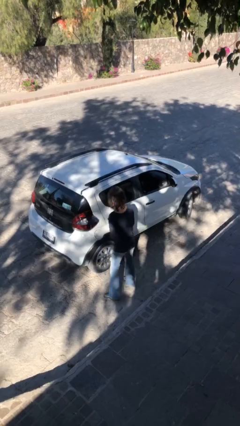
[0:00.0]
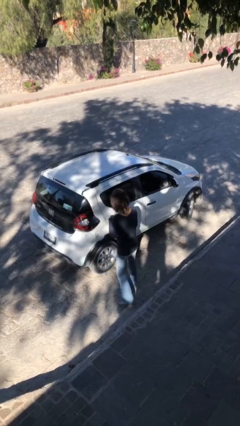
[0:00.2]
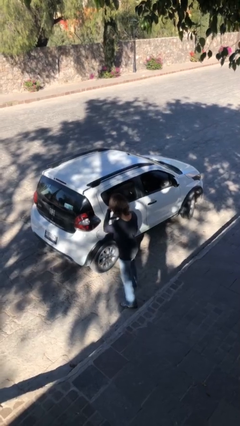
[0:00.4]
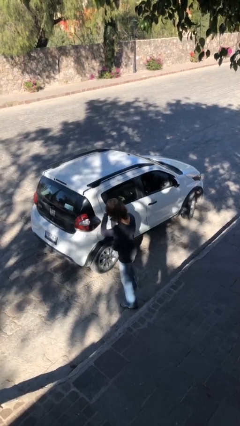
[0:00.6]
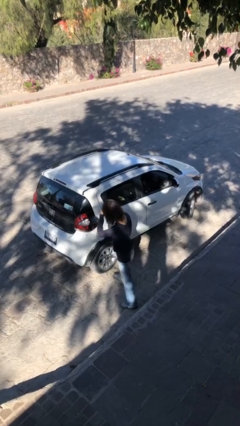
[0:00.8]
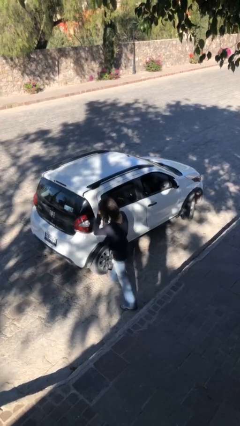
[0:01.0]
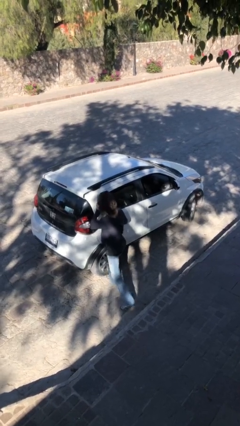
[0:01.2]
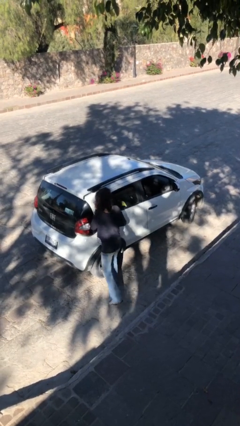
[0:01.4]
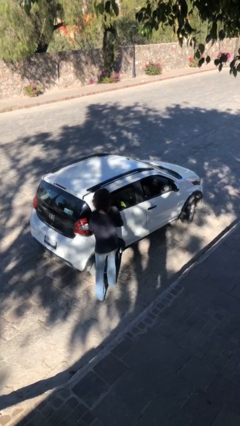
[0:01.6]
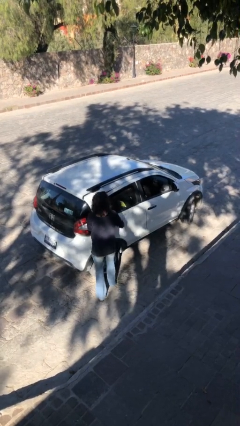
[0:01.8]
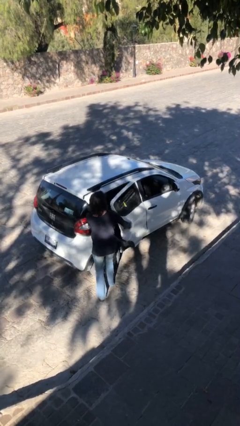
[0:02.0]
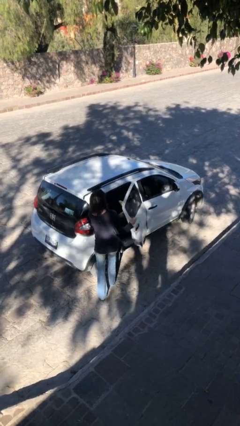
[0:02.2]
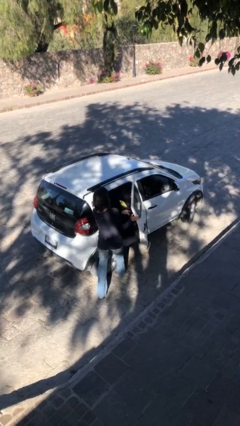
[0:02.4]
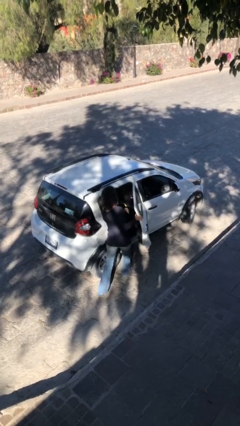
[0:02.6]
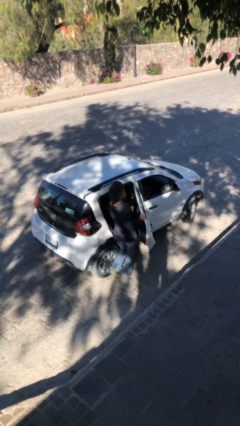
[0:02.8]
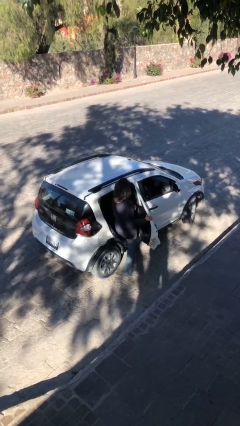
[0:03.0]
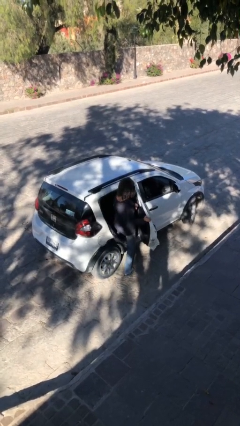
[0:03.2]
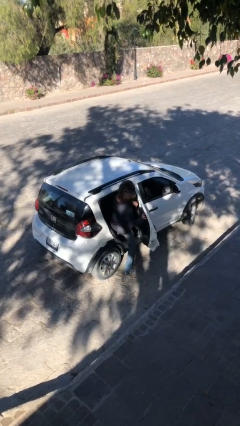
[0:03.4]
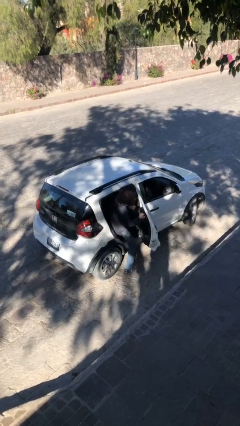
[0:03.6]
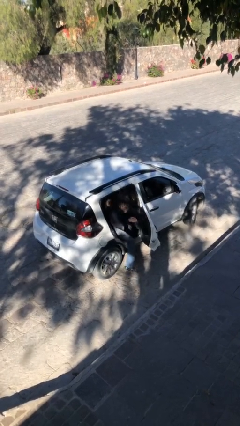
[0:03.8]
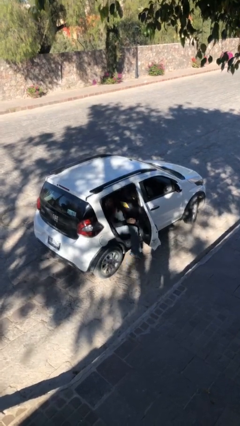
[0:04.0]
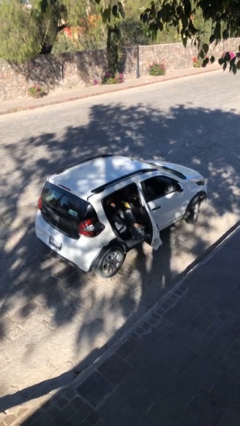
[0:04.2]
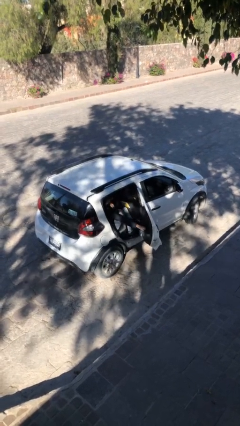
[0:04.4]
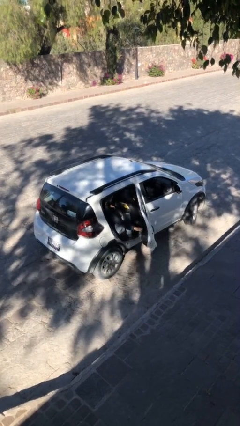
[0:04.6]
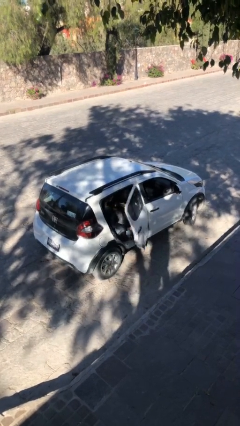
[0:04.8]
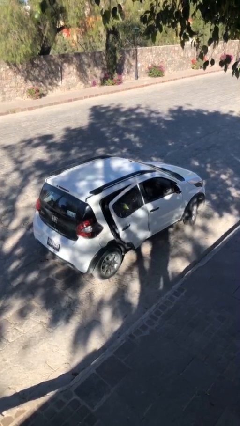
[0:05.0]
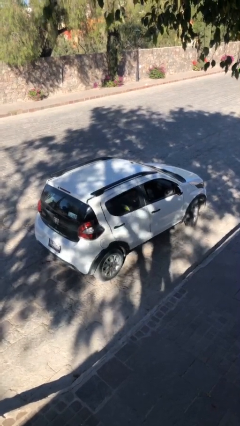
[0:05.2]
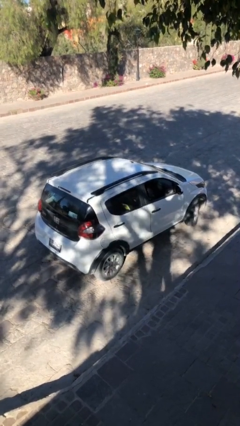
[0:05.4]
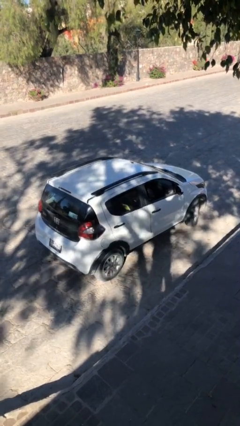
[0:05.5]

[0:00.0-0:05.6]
car picks up person

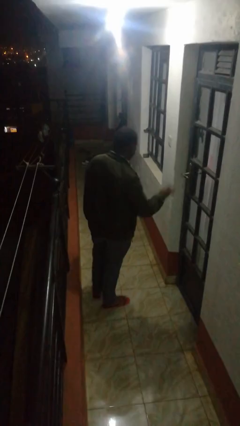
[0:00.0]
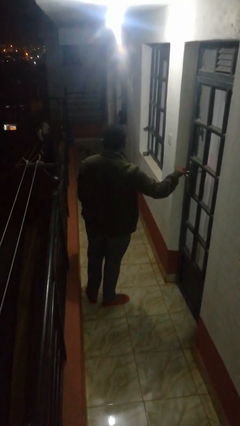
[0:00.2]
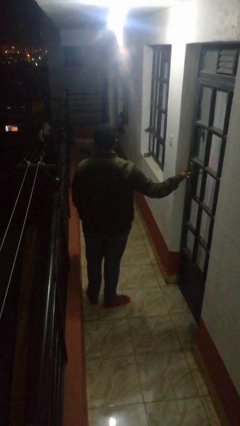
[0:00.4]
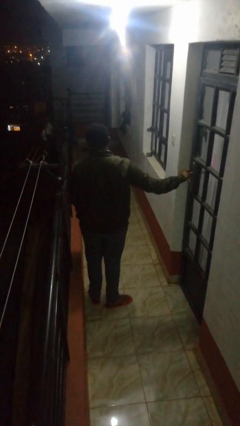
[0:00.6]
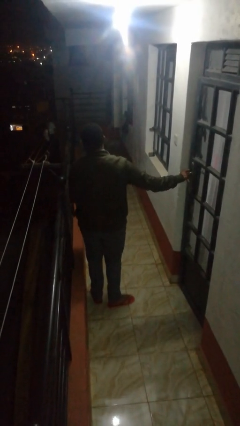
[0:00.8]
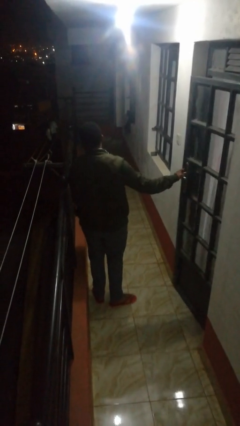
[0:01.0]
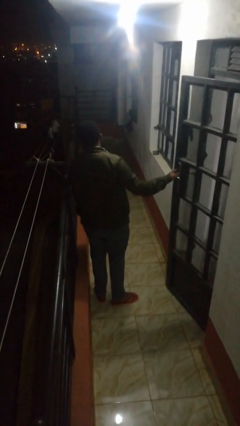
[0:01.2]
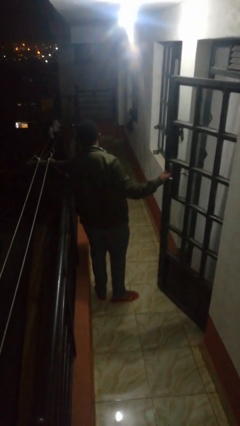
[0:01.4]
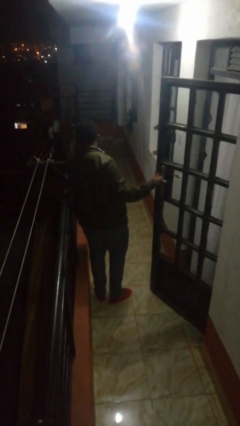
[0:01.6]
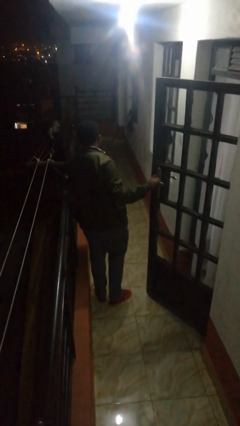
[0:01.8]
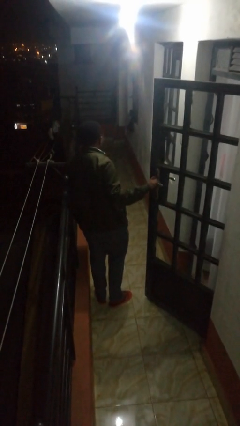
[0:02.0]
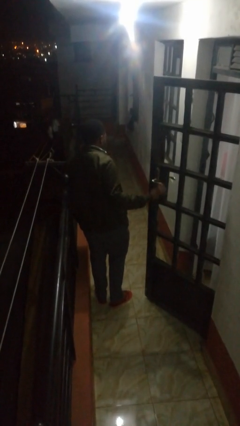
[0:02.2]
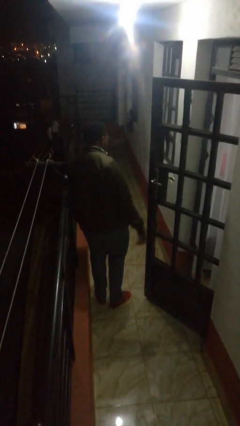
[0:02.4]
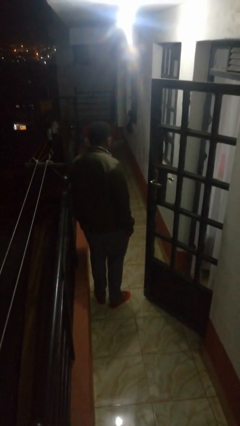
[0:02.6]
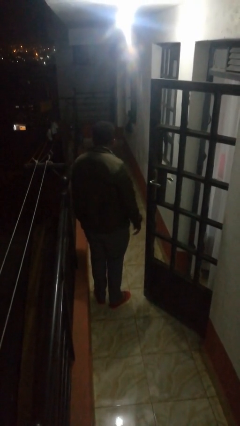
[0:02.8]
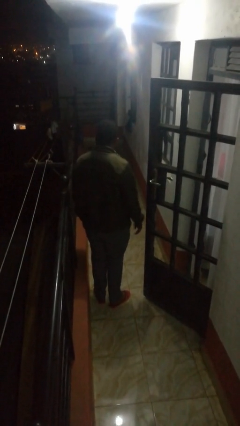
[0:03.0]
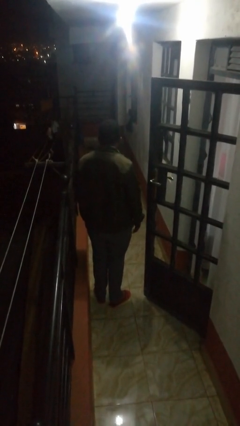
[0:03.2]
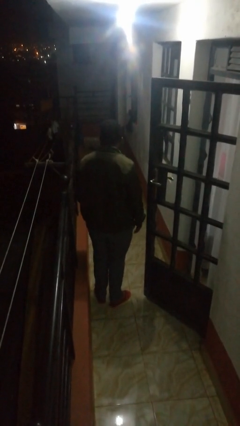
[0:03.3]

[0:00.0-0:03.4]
person opens facility door

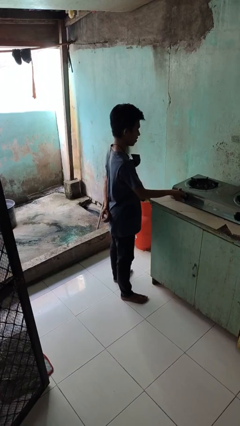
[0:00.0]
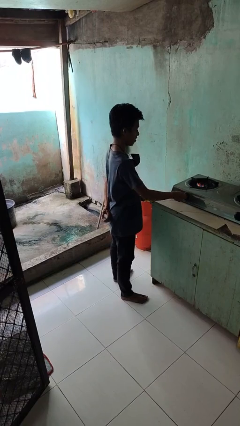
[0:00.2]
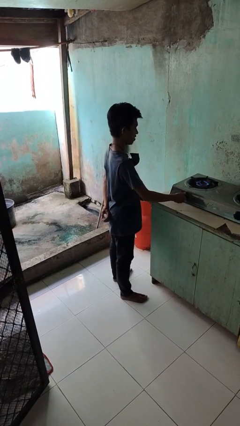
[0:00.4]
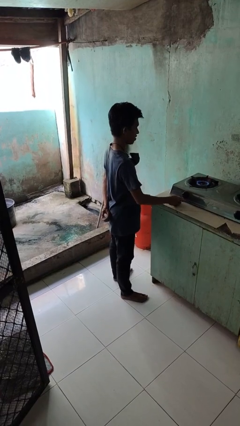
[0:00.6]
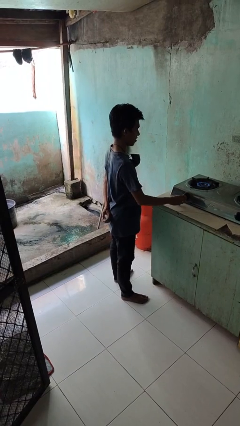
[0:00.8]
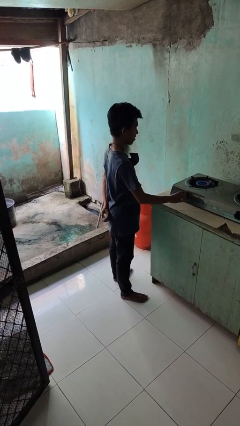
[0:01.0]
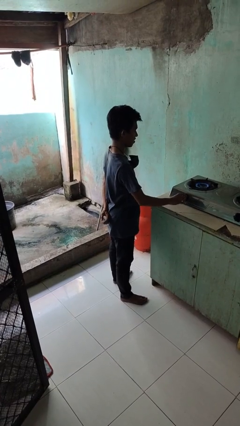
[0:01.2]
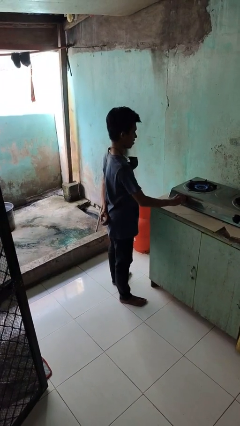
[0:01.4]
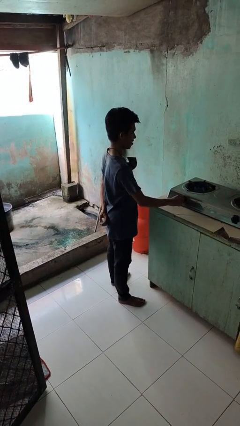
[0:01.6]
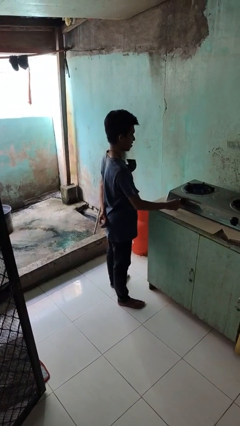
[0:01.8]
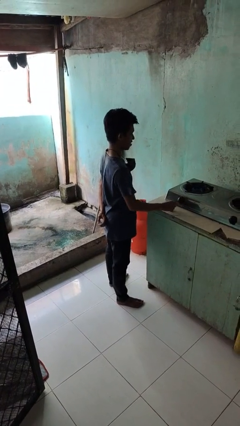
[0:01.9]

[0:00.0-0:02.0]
person turns on stovetop

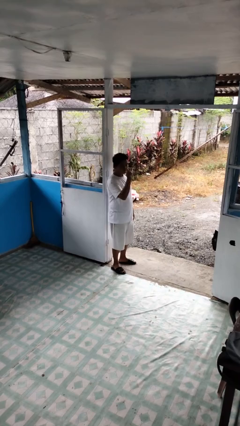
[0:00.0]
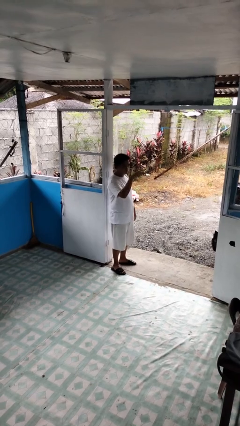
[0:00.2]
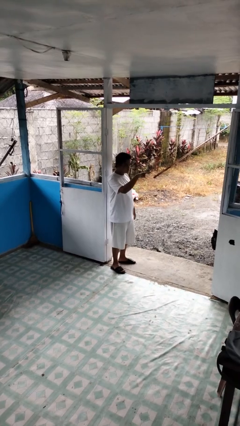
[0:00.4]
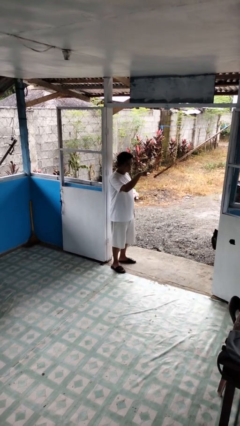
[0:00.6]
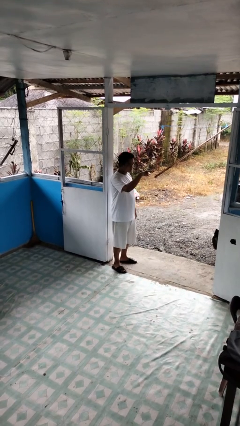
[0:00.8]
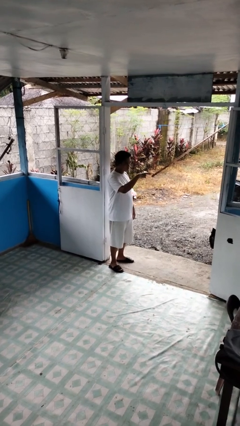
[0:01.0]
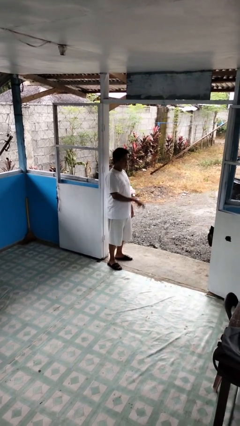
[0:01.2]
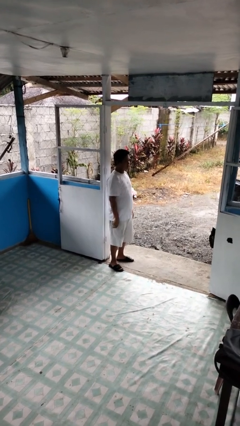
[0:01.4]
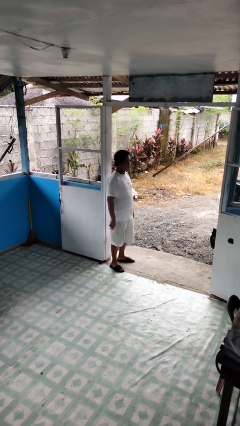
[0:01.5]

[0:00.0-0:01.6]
person gestures watch closely

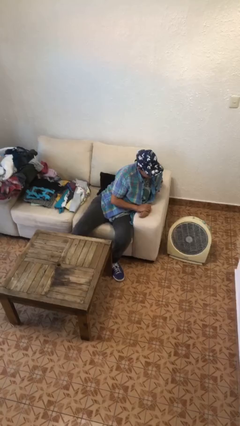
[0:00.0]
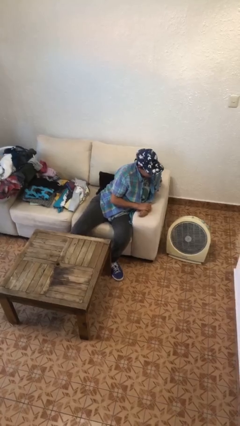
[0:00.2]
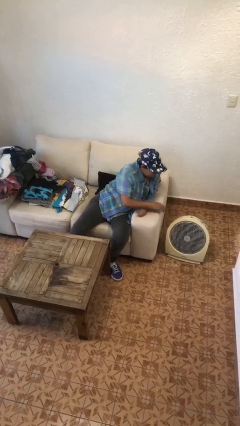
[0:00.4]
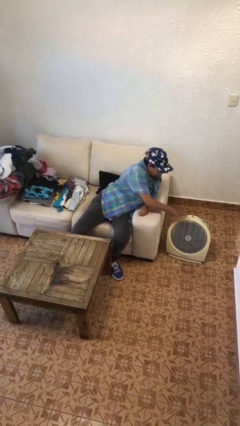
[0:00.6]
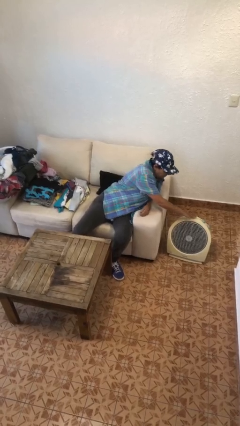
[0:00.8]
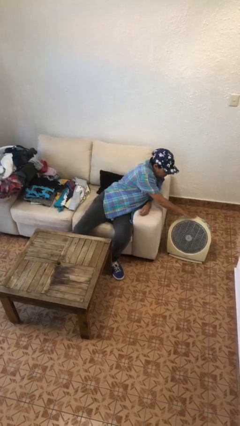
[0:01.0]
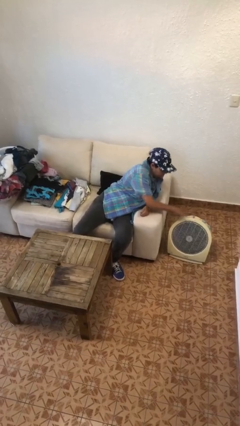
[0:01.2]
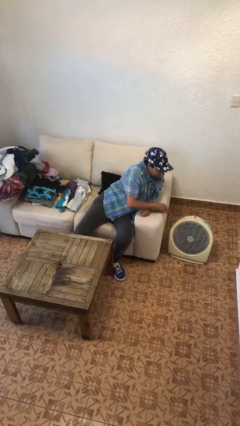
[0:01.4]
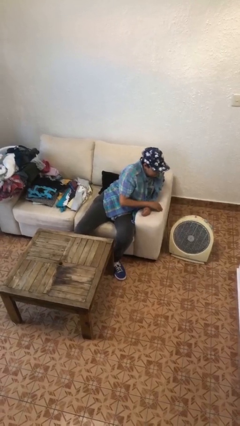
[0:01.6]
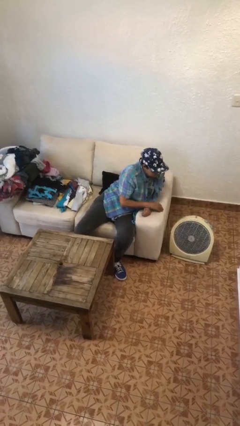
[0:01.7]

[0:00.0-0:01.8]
person turns off fan

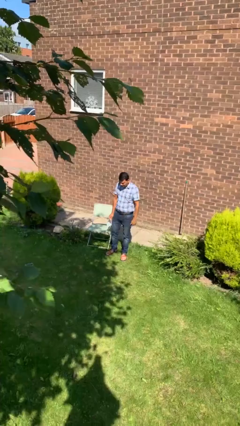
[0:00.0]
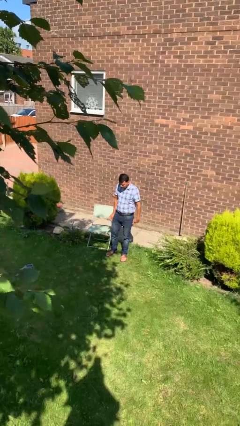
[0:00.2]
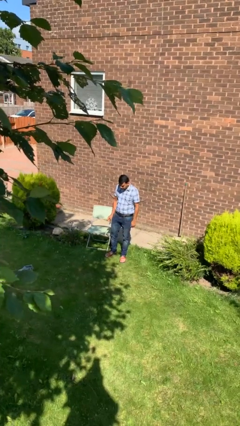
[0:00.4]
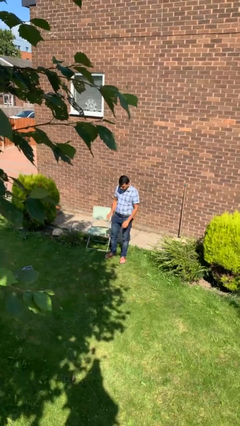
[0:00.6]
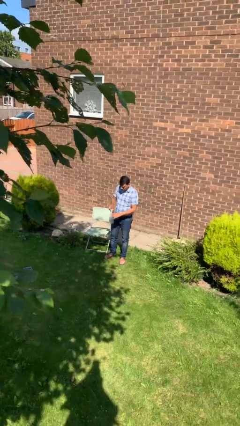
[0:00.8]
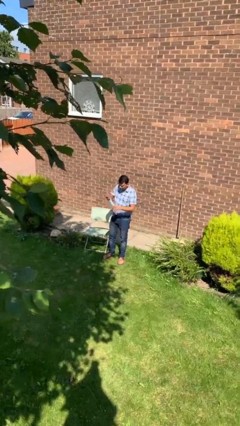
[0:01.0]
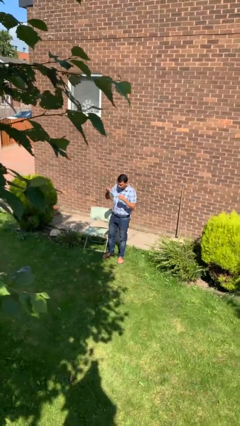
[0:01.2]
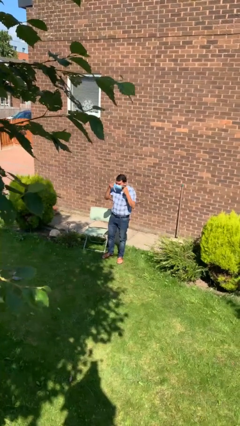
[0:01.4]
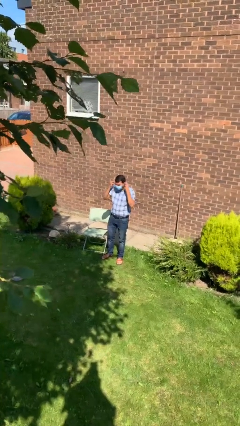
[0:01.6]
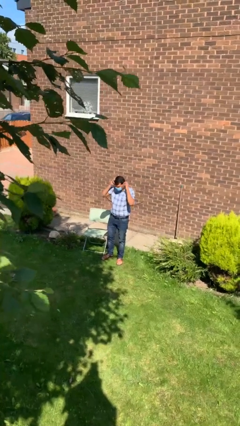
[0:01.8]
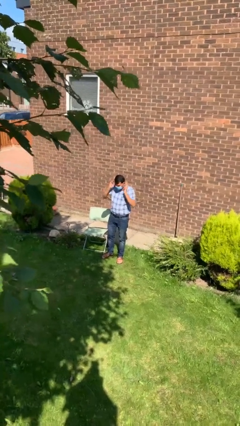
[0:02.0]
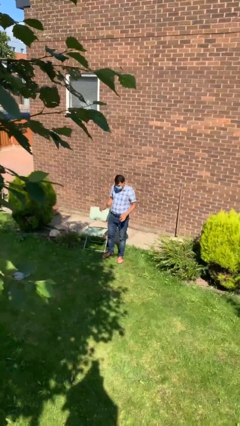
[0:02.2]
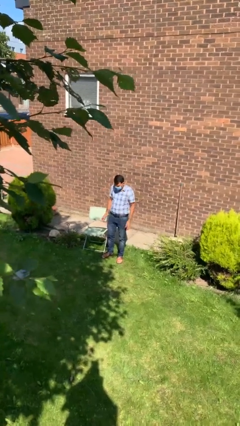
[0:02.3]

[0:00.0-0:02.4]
person puts on facemask

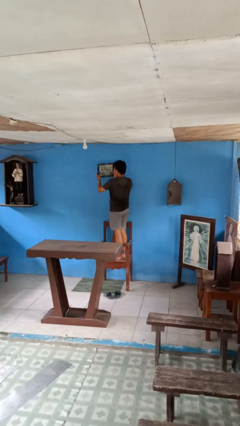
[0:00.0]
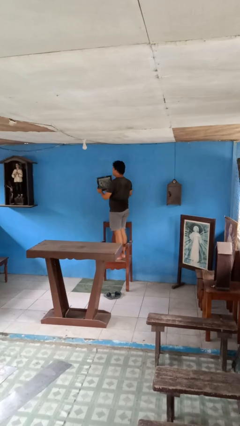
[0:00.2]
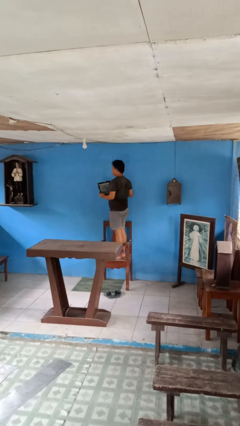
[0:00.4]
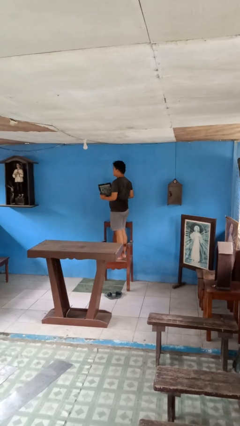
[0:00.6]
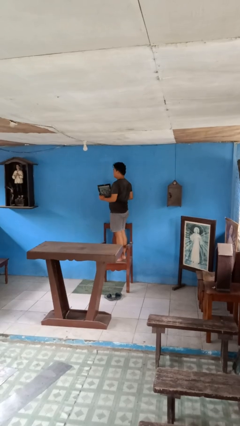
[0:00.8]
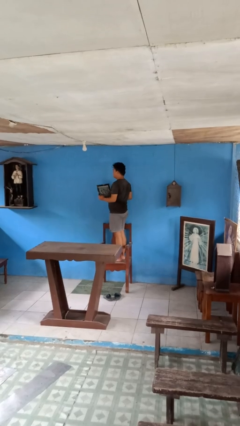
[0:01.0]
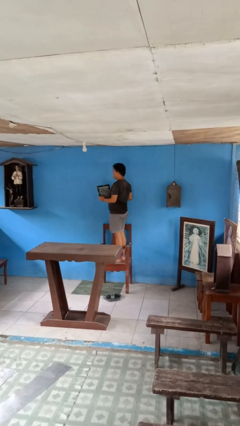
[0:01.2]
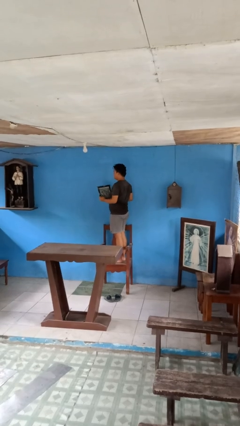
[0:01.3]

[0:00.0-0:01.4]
person takes down picture frame
